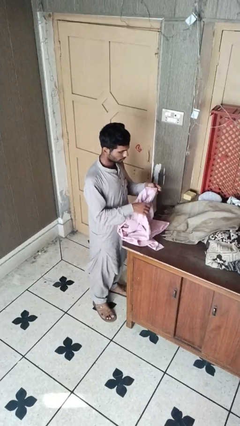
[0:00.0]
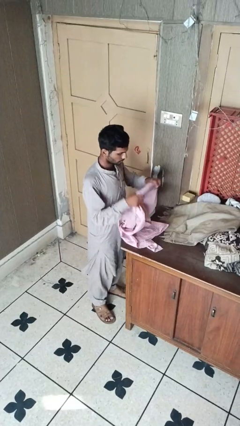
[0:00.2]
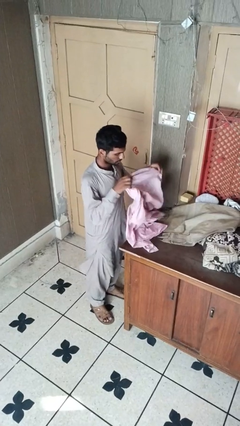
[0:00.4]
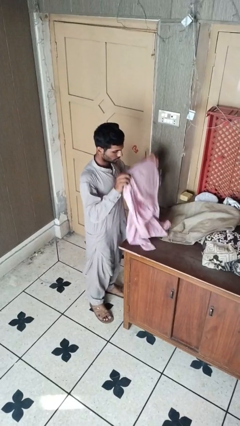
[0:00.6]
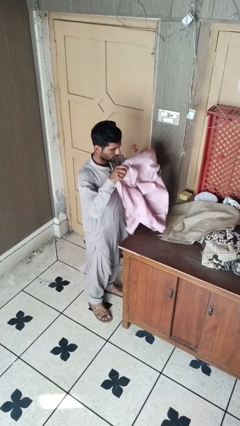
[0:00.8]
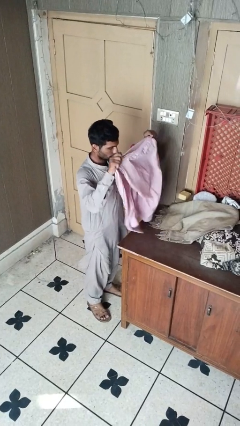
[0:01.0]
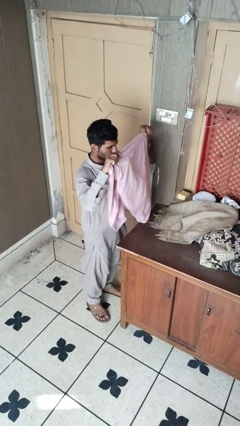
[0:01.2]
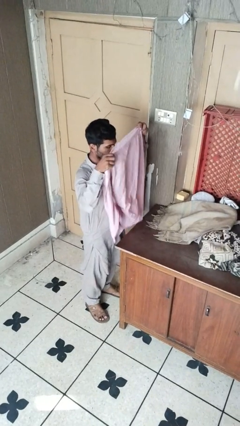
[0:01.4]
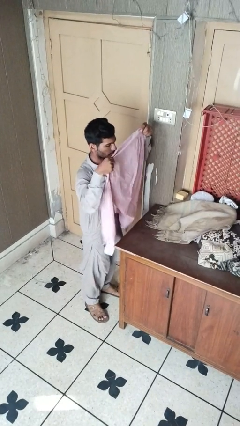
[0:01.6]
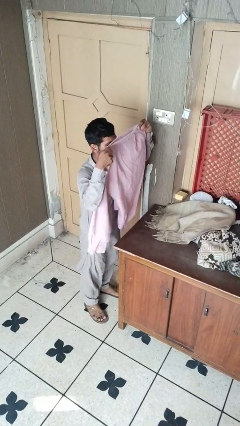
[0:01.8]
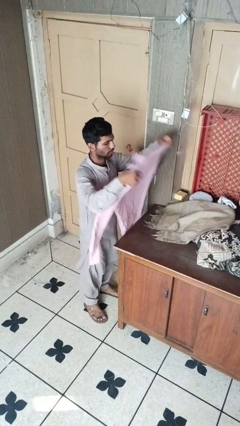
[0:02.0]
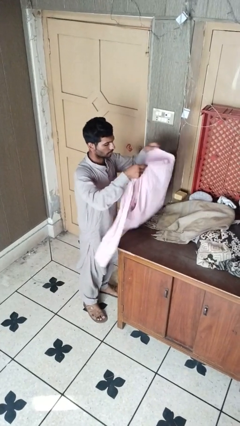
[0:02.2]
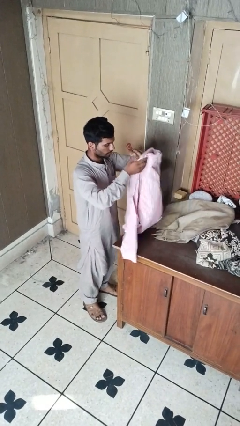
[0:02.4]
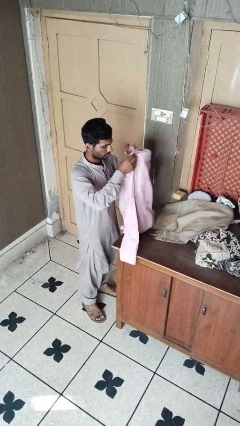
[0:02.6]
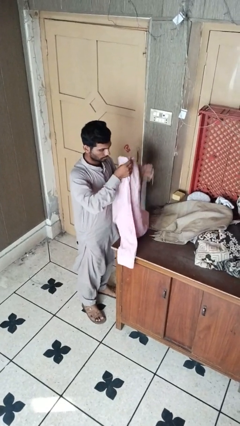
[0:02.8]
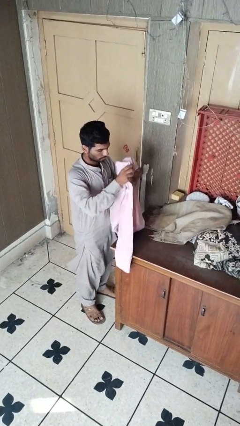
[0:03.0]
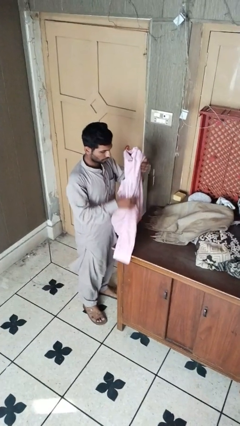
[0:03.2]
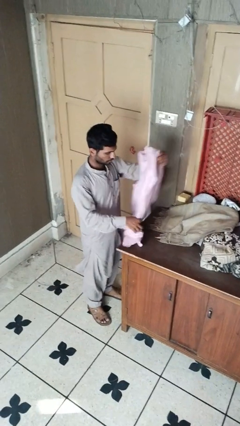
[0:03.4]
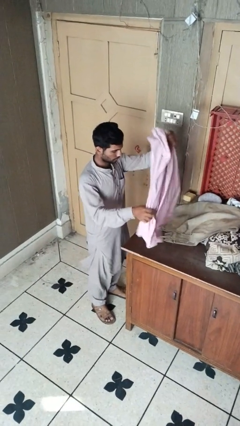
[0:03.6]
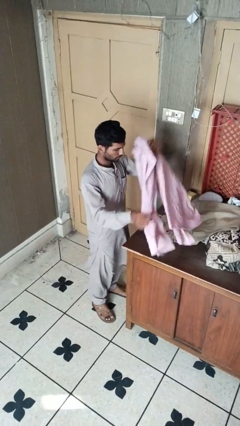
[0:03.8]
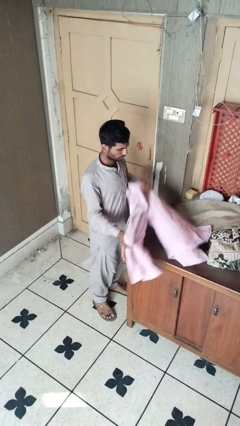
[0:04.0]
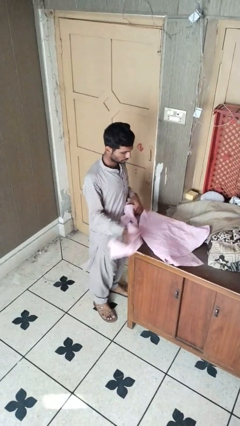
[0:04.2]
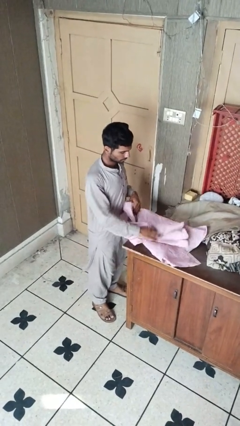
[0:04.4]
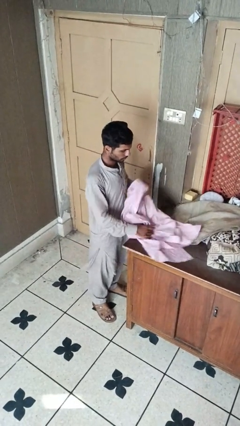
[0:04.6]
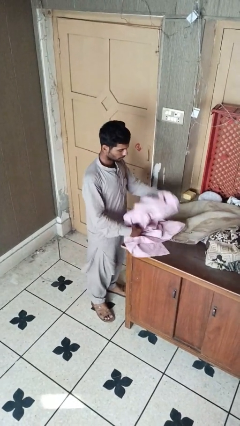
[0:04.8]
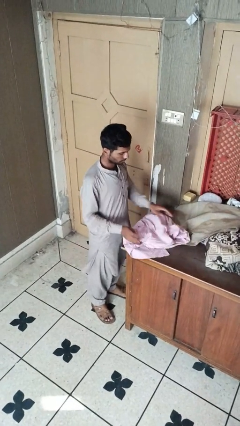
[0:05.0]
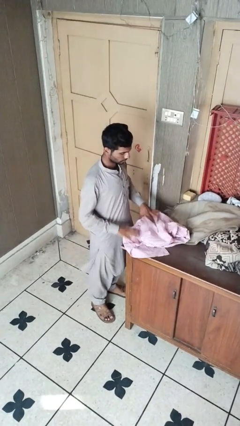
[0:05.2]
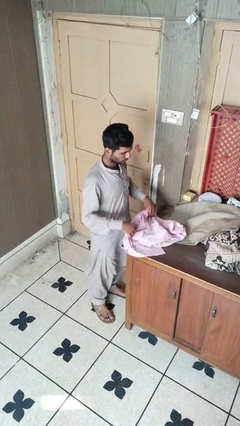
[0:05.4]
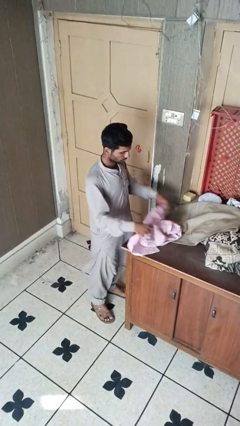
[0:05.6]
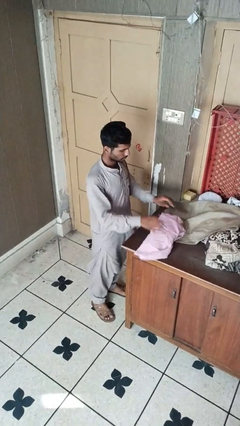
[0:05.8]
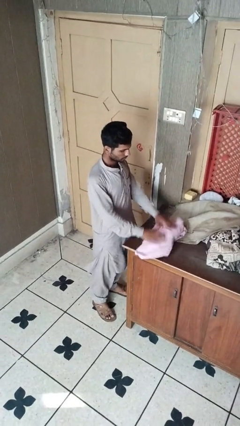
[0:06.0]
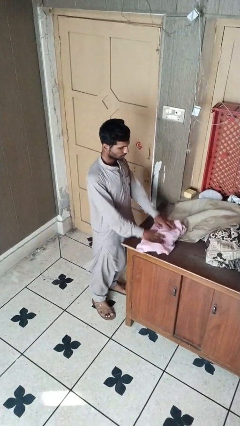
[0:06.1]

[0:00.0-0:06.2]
person folds shirt

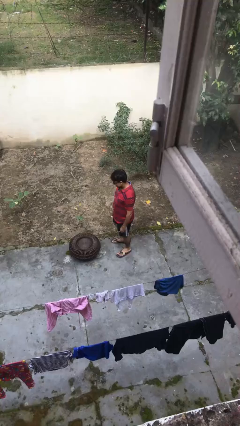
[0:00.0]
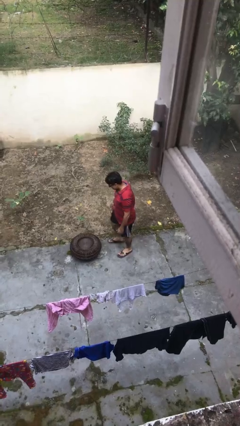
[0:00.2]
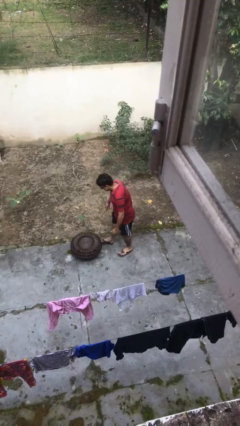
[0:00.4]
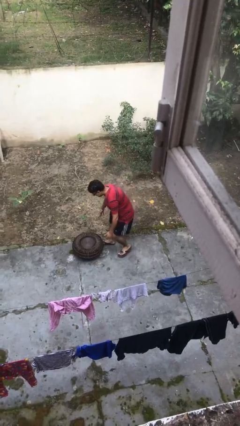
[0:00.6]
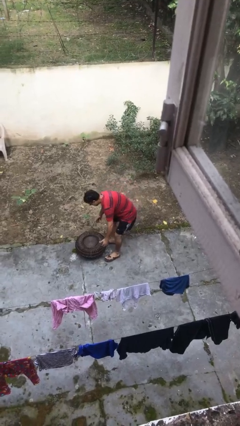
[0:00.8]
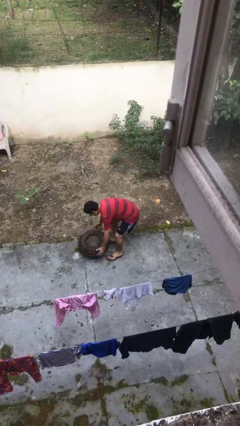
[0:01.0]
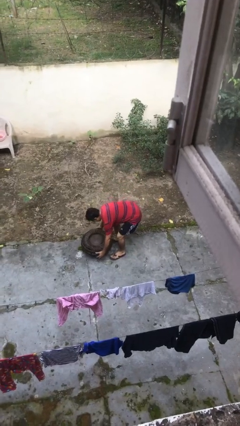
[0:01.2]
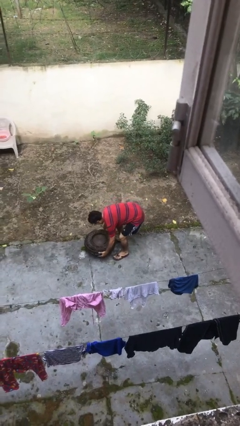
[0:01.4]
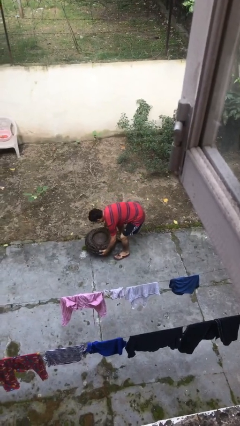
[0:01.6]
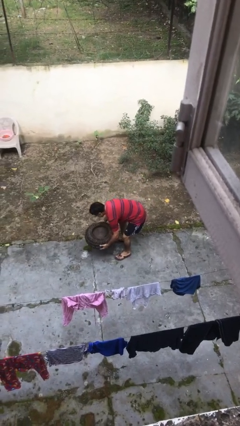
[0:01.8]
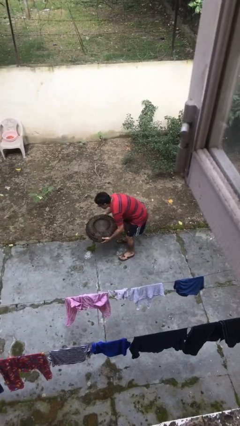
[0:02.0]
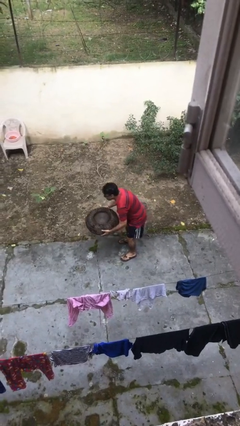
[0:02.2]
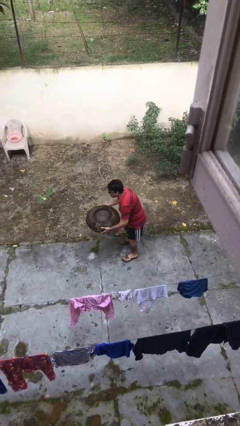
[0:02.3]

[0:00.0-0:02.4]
person picks up object from floor

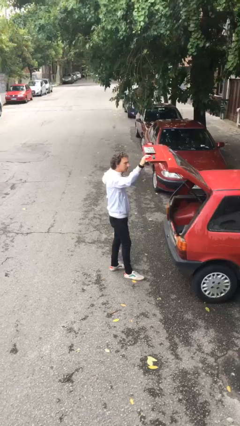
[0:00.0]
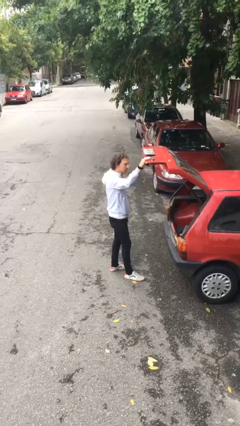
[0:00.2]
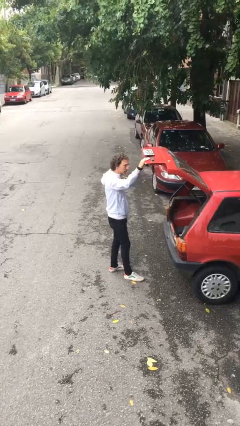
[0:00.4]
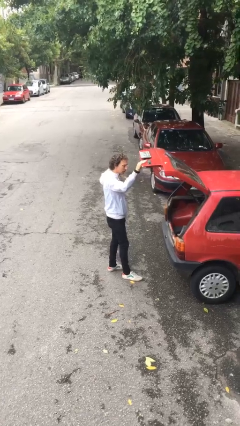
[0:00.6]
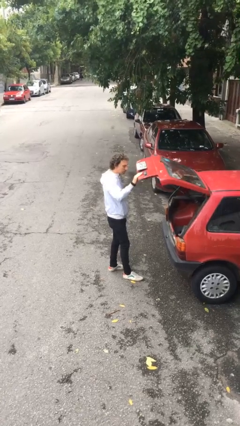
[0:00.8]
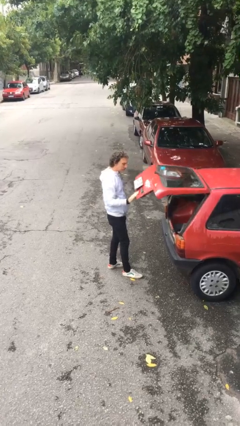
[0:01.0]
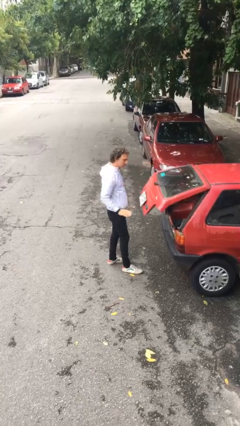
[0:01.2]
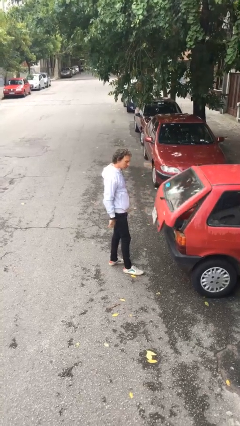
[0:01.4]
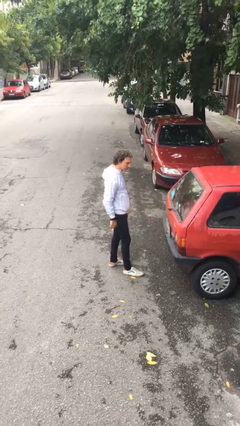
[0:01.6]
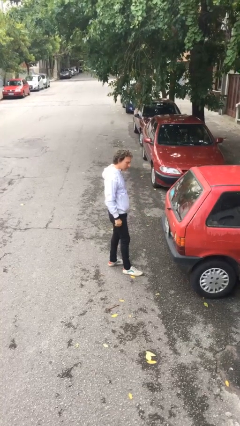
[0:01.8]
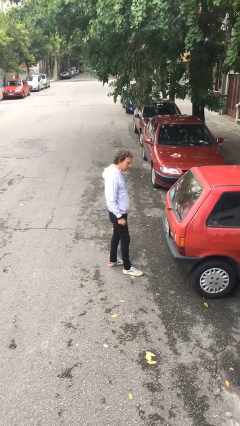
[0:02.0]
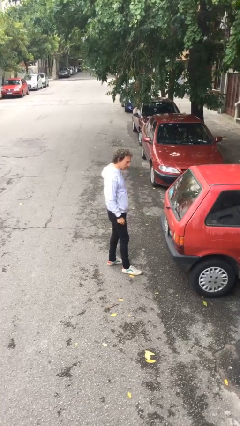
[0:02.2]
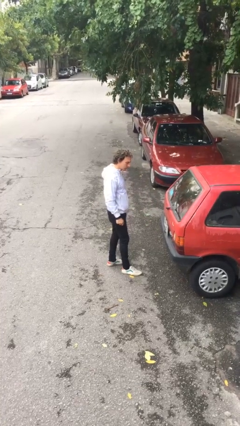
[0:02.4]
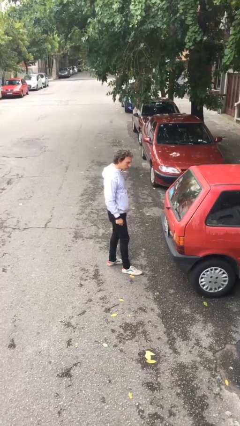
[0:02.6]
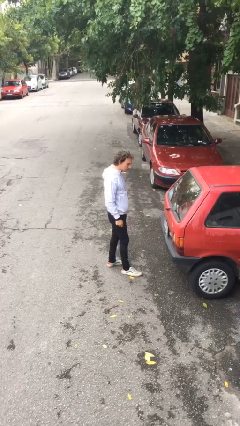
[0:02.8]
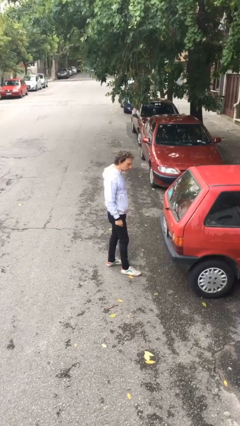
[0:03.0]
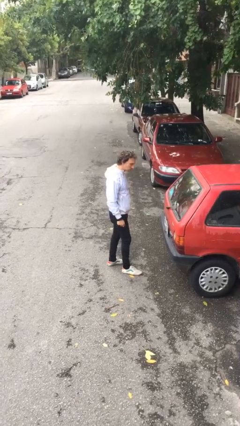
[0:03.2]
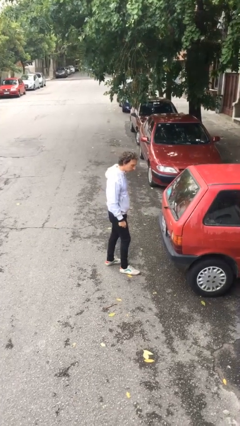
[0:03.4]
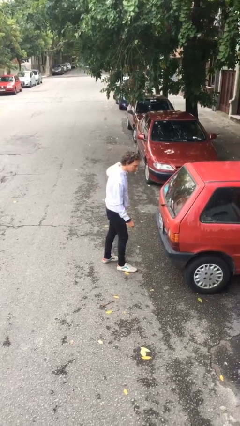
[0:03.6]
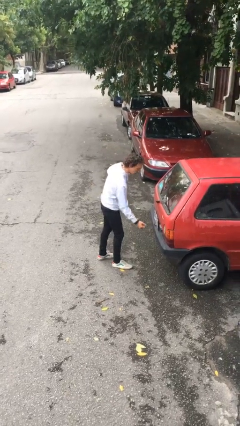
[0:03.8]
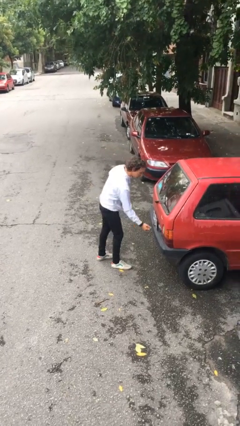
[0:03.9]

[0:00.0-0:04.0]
person closes car trunk

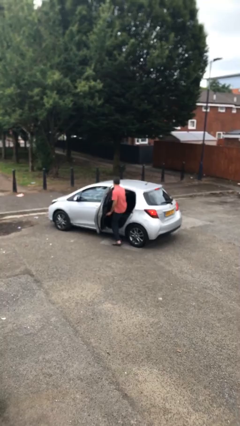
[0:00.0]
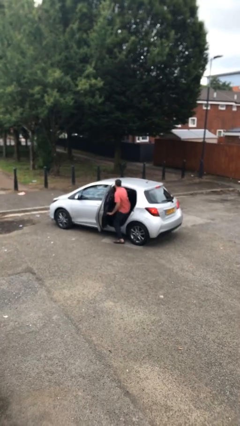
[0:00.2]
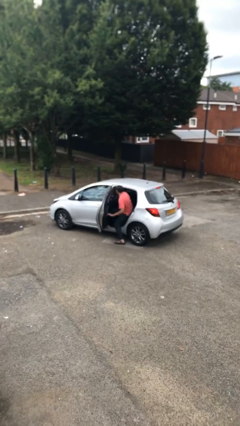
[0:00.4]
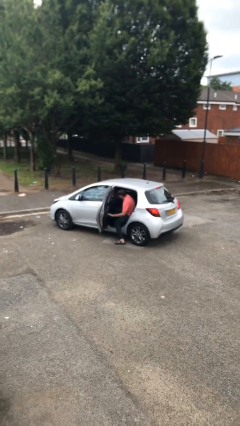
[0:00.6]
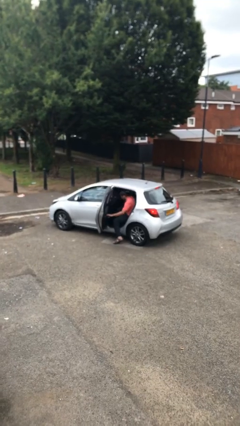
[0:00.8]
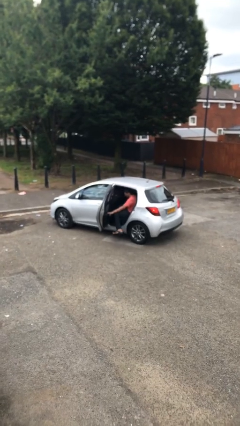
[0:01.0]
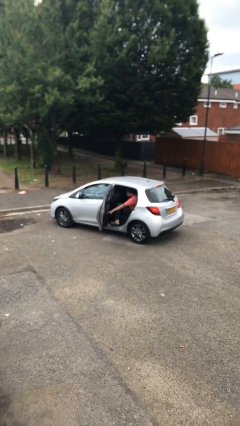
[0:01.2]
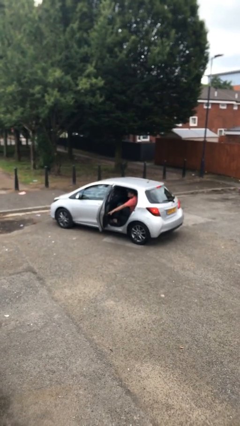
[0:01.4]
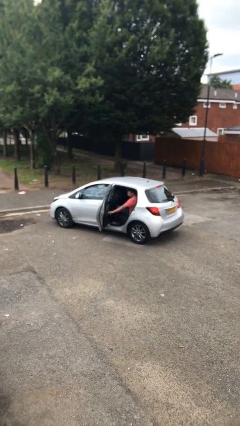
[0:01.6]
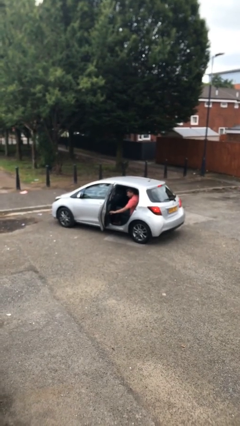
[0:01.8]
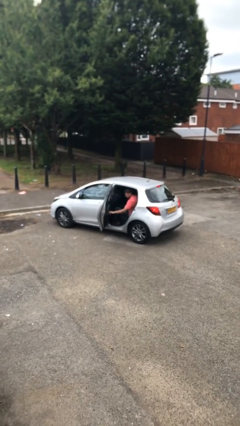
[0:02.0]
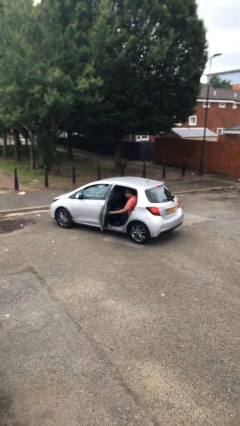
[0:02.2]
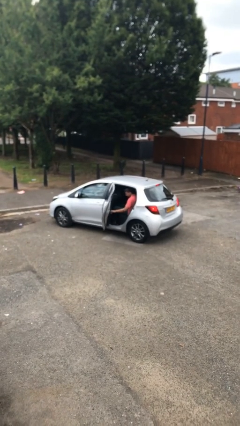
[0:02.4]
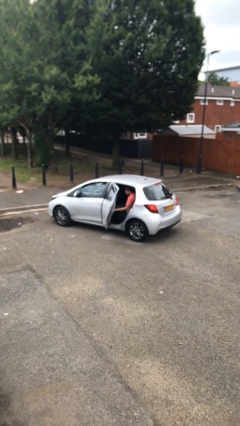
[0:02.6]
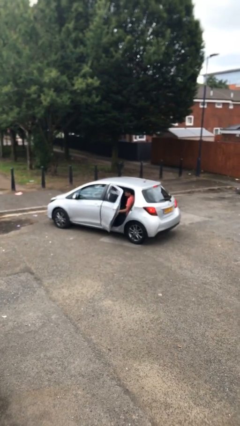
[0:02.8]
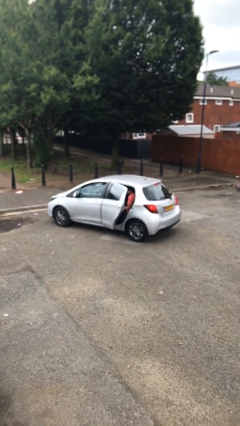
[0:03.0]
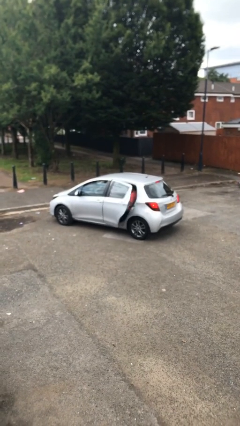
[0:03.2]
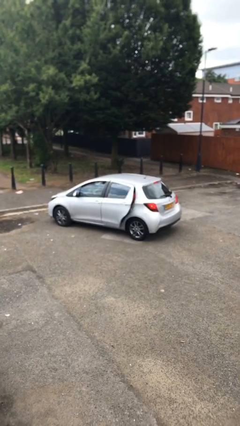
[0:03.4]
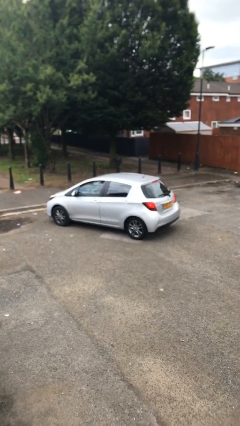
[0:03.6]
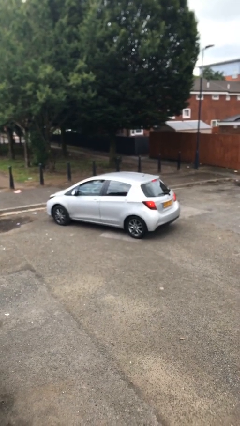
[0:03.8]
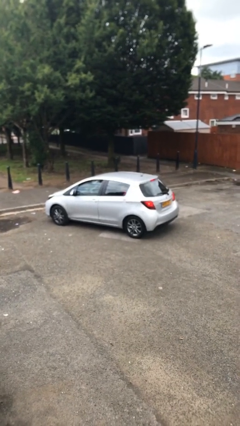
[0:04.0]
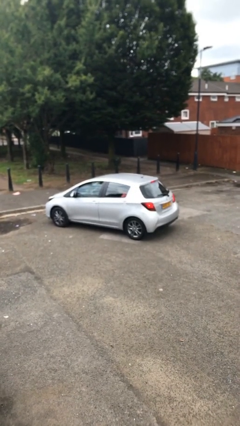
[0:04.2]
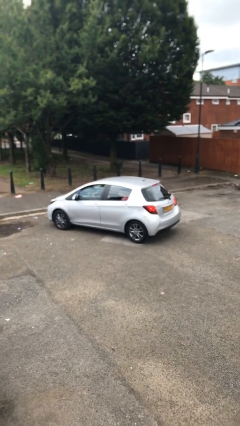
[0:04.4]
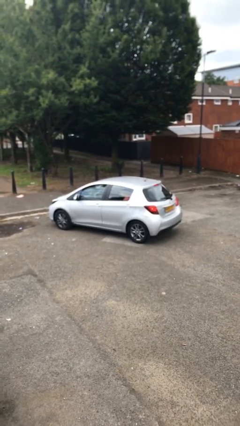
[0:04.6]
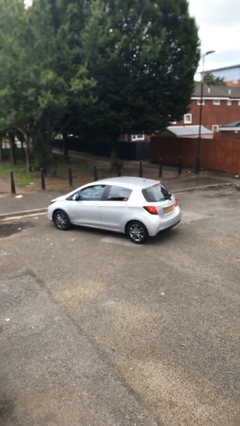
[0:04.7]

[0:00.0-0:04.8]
person closes car door

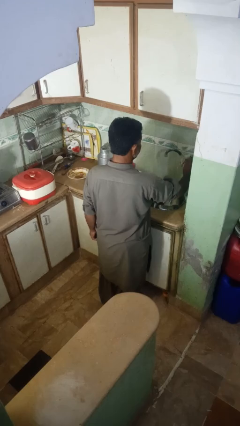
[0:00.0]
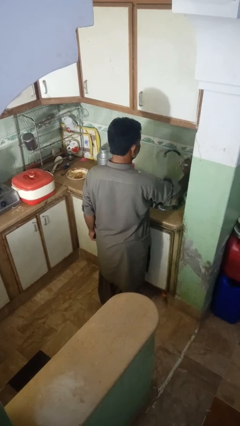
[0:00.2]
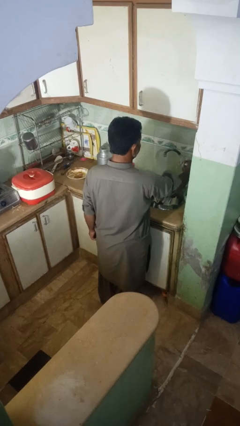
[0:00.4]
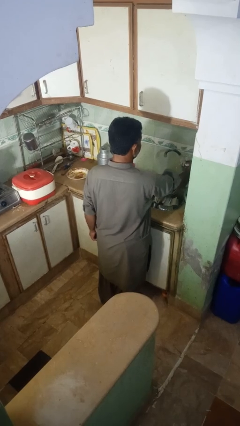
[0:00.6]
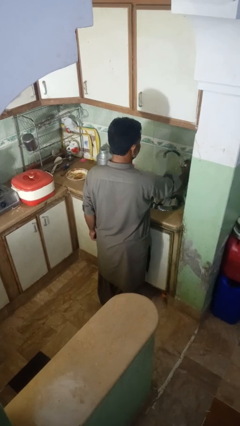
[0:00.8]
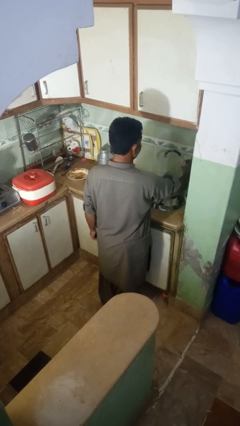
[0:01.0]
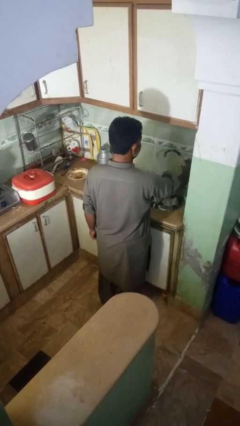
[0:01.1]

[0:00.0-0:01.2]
person turns off faucet
